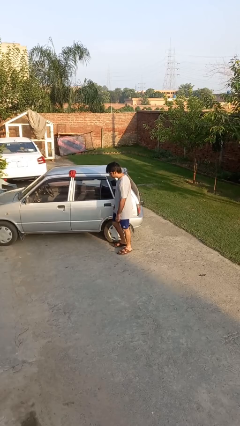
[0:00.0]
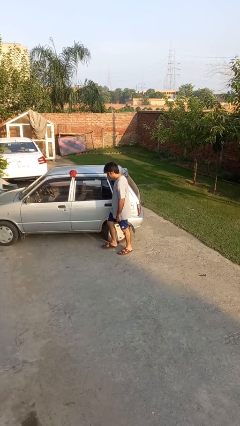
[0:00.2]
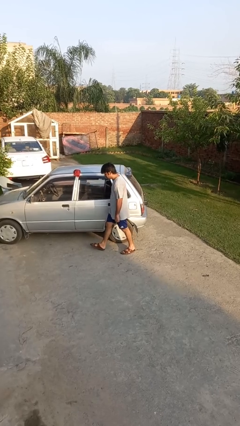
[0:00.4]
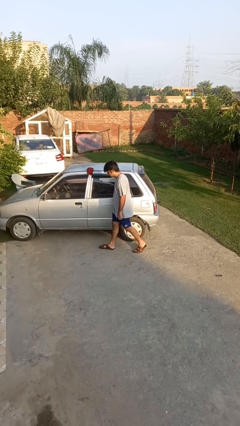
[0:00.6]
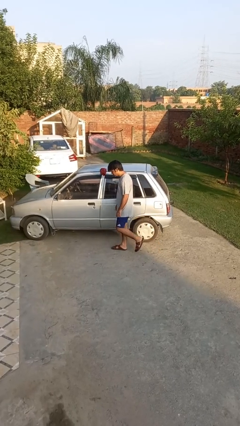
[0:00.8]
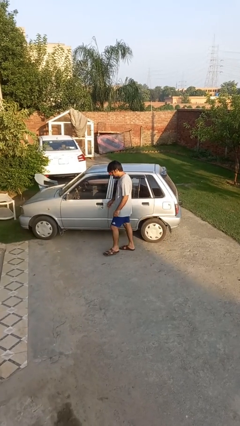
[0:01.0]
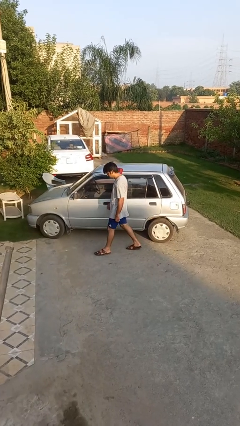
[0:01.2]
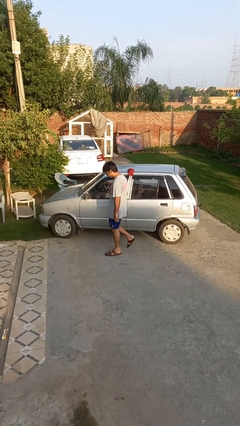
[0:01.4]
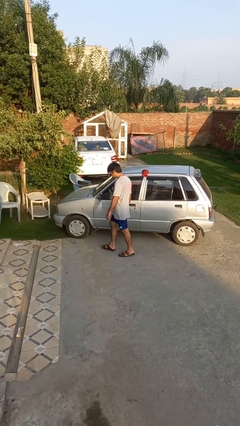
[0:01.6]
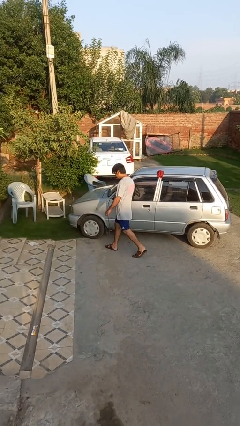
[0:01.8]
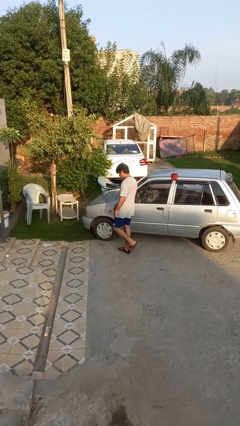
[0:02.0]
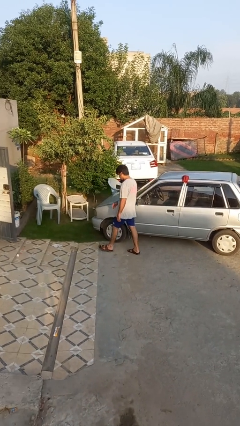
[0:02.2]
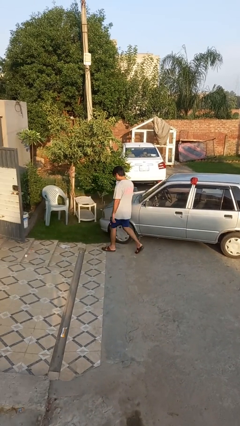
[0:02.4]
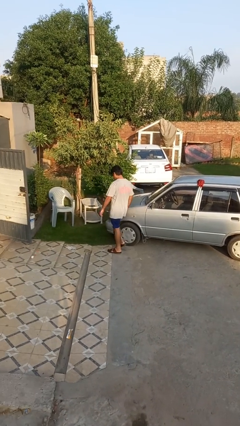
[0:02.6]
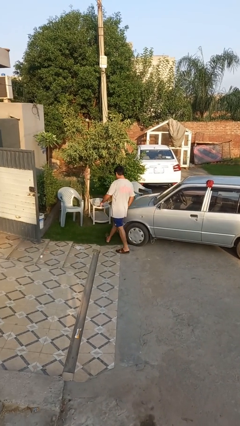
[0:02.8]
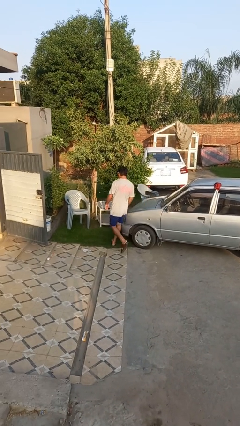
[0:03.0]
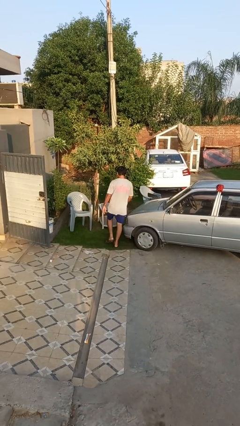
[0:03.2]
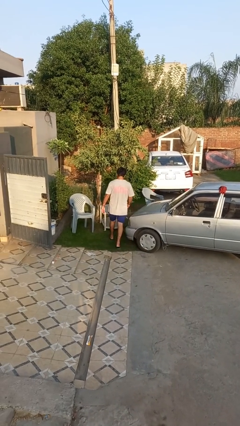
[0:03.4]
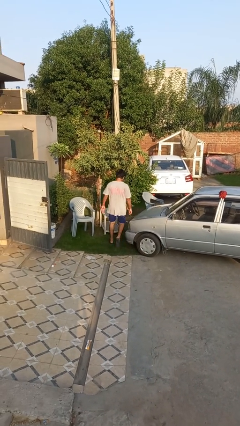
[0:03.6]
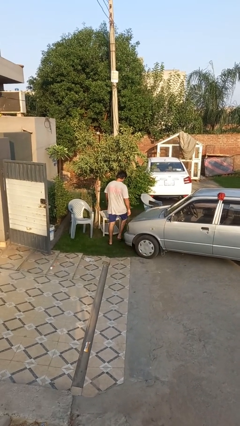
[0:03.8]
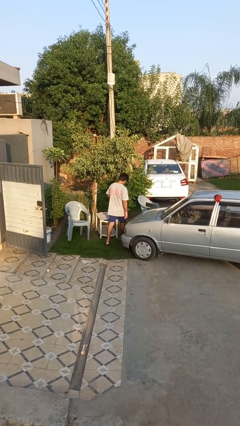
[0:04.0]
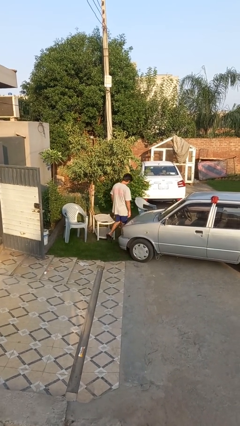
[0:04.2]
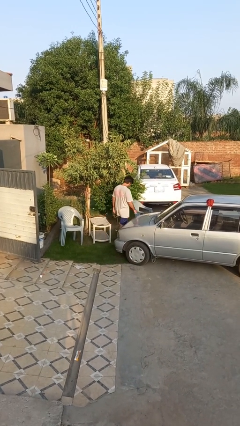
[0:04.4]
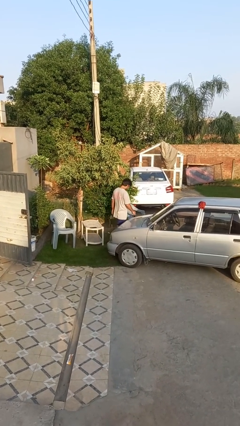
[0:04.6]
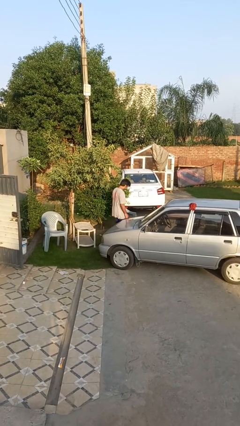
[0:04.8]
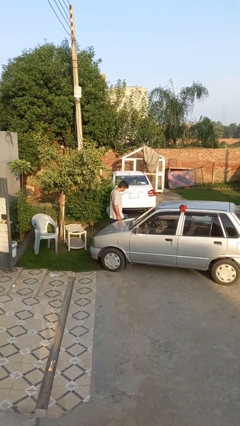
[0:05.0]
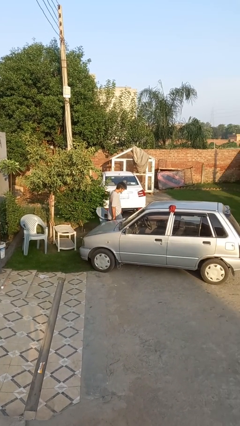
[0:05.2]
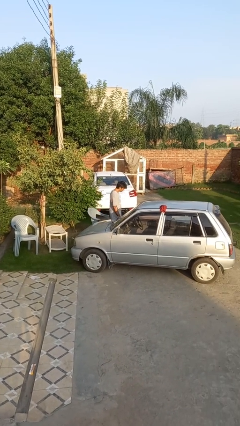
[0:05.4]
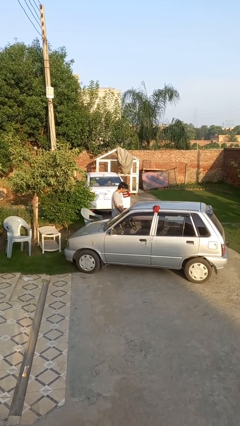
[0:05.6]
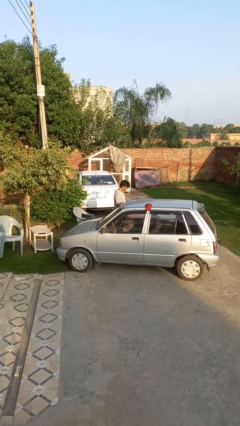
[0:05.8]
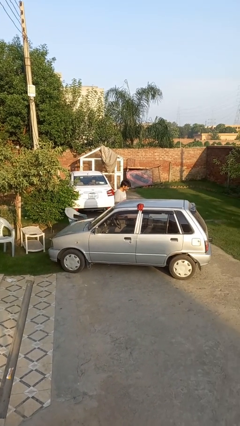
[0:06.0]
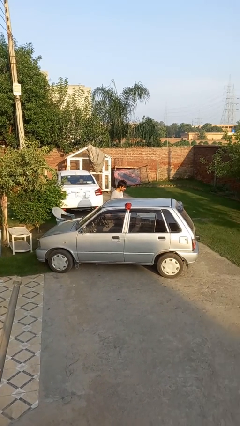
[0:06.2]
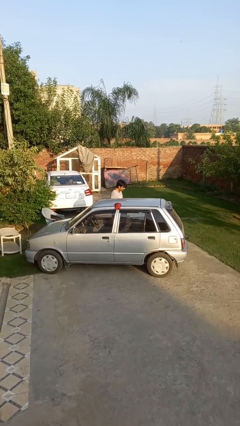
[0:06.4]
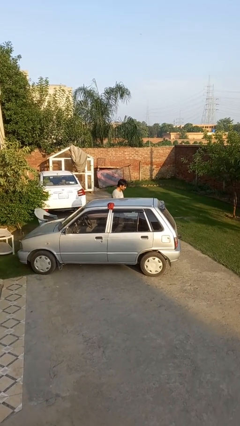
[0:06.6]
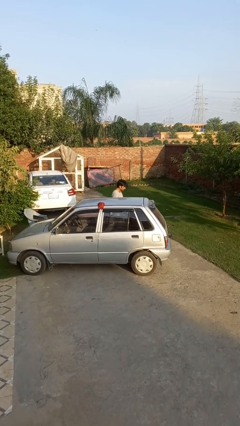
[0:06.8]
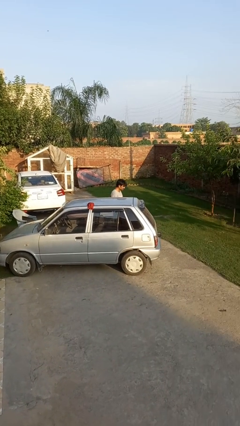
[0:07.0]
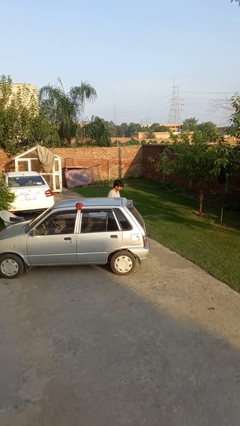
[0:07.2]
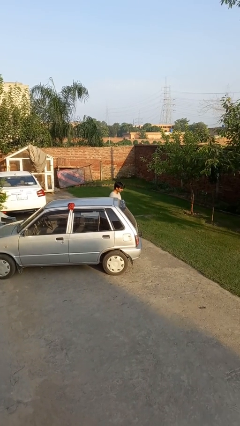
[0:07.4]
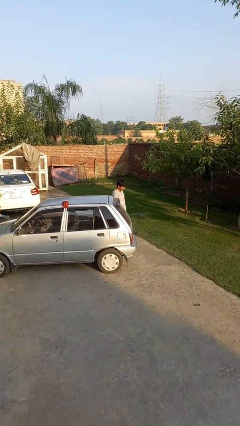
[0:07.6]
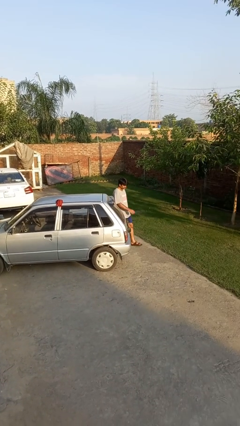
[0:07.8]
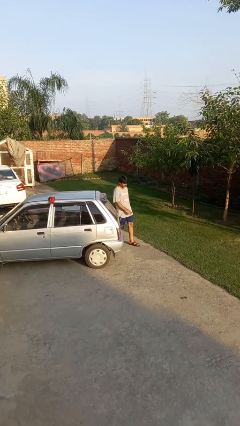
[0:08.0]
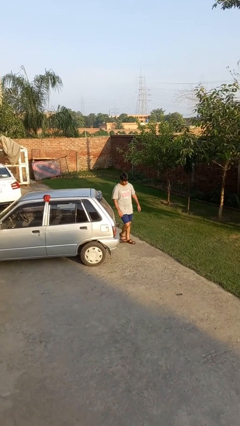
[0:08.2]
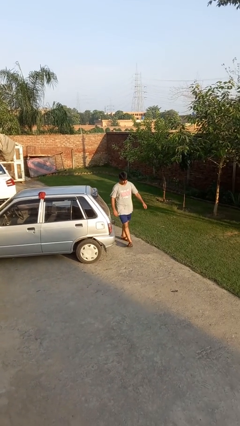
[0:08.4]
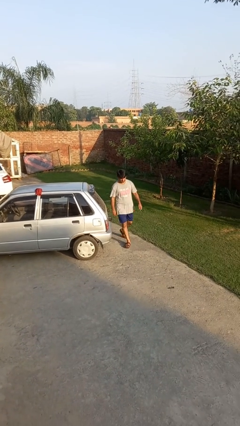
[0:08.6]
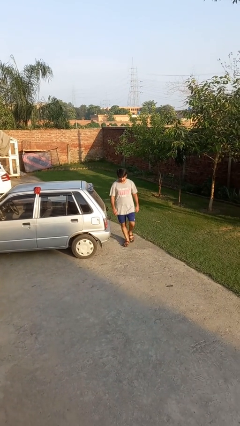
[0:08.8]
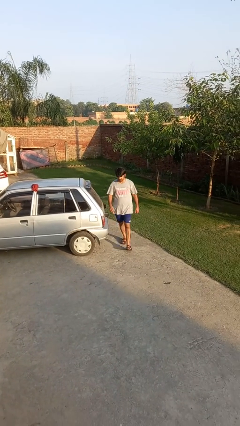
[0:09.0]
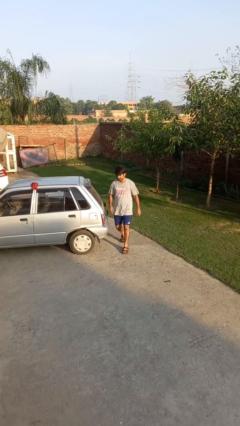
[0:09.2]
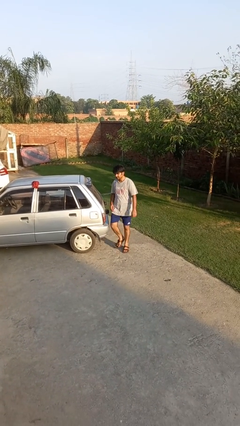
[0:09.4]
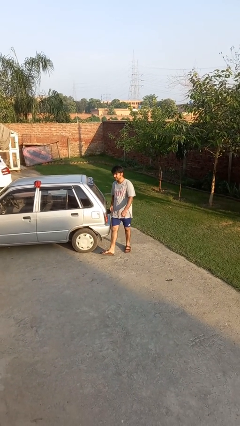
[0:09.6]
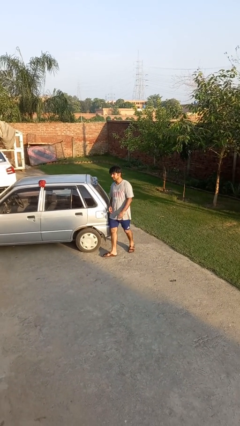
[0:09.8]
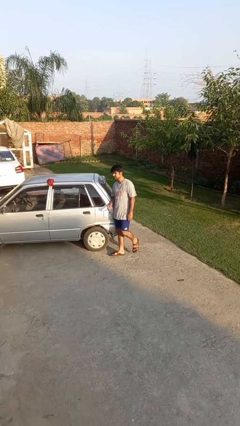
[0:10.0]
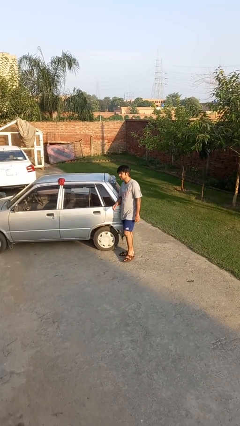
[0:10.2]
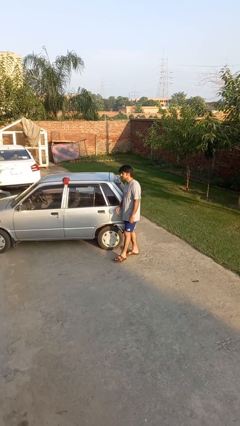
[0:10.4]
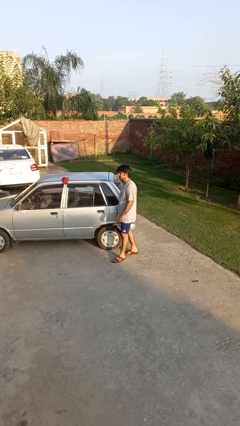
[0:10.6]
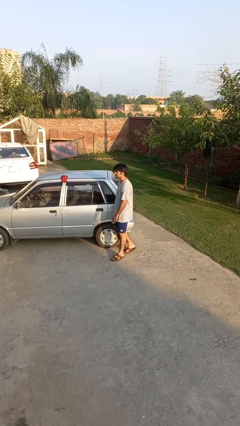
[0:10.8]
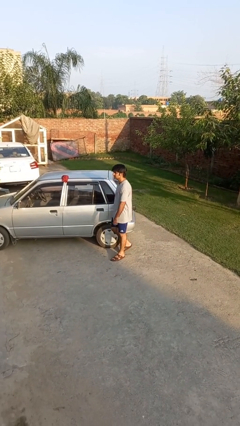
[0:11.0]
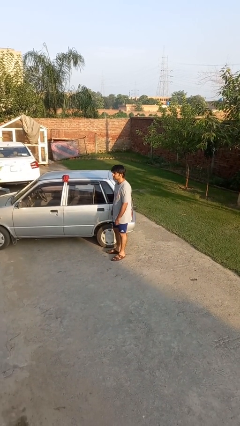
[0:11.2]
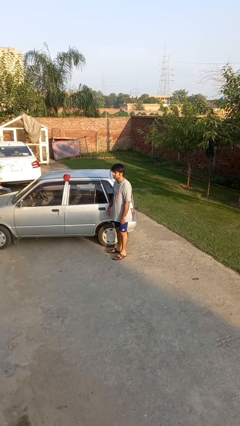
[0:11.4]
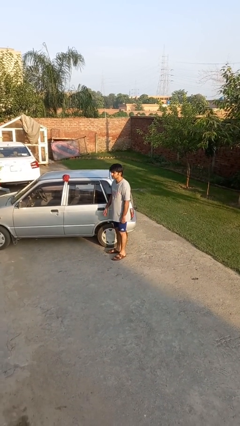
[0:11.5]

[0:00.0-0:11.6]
person walks around car

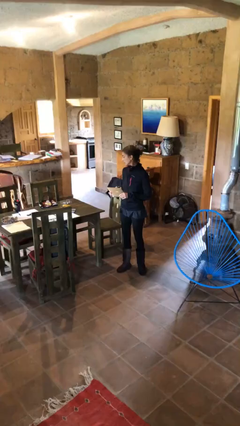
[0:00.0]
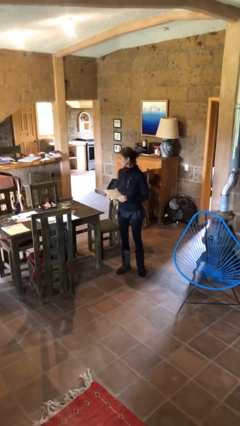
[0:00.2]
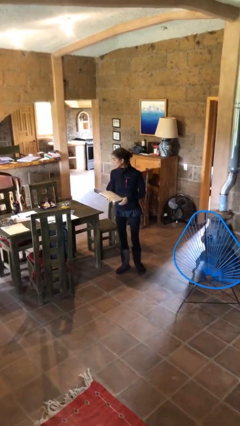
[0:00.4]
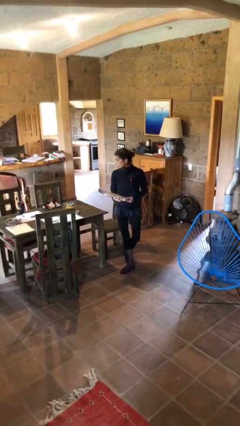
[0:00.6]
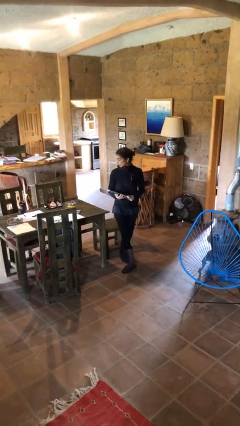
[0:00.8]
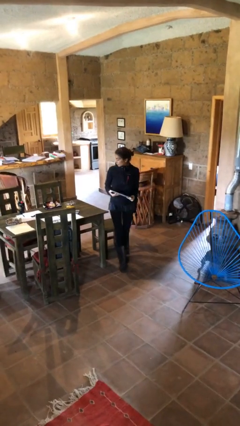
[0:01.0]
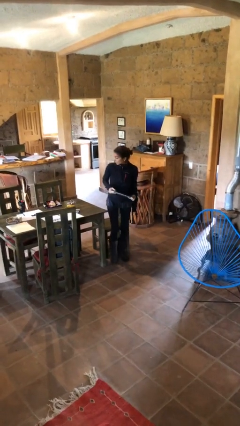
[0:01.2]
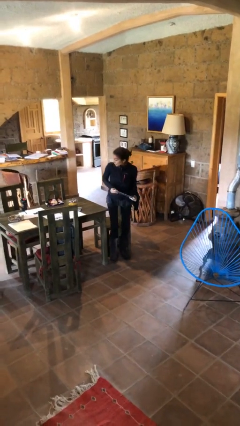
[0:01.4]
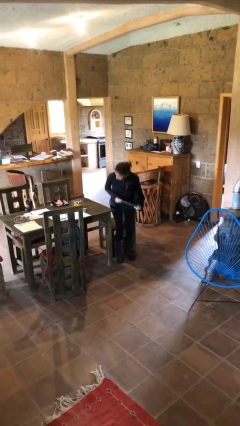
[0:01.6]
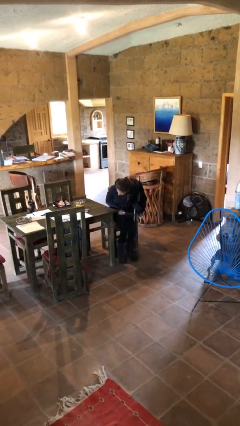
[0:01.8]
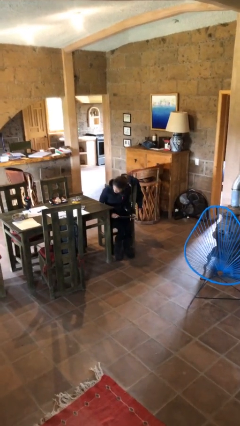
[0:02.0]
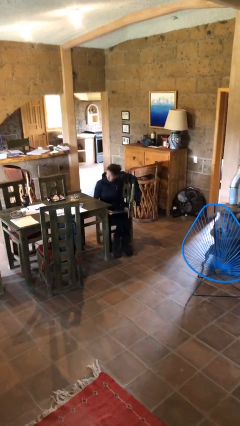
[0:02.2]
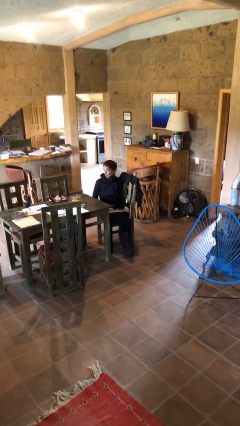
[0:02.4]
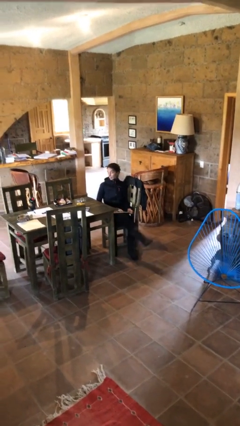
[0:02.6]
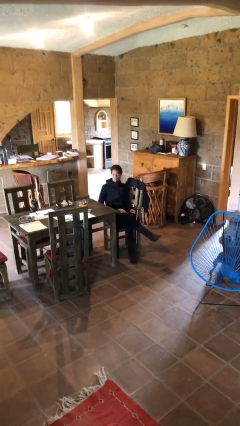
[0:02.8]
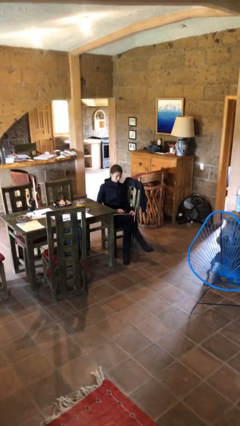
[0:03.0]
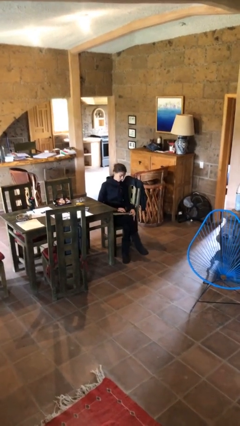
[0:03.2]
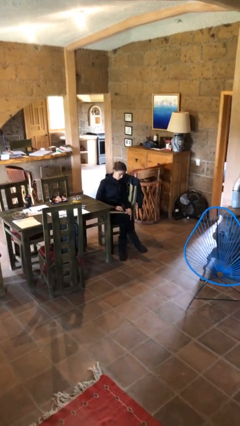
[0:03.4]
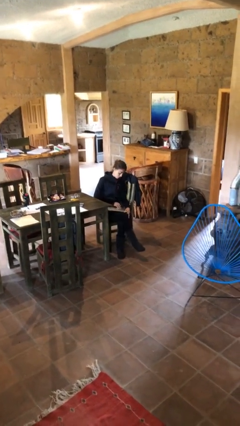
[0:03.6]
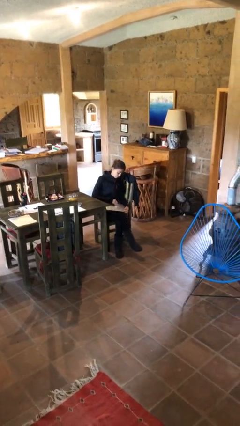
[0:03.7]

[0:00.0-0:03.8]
person sits down

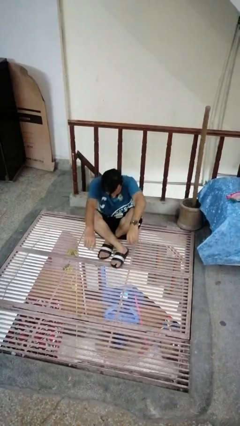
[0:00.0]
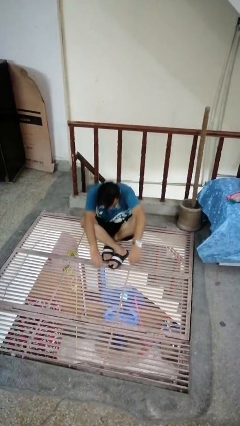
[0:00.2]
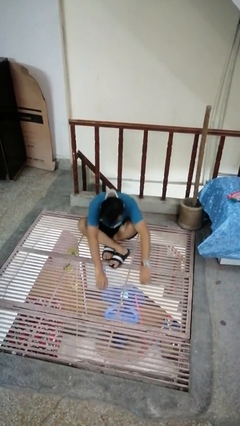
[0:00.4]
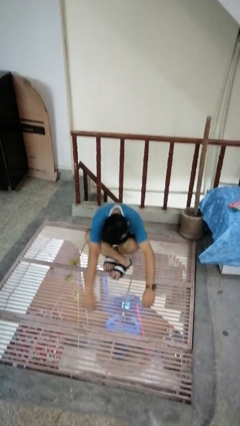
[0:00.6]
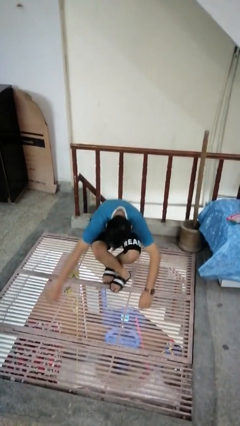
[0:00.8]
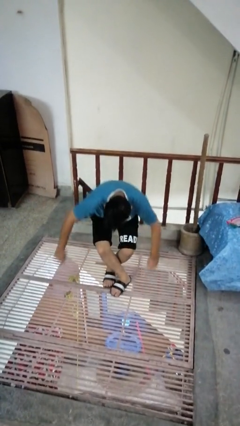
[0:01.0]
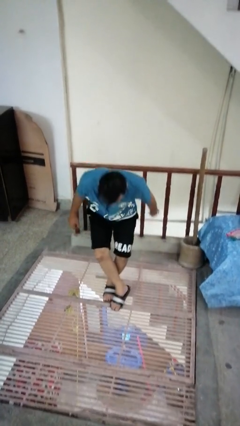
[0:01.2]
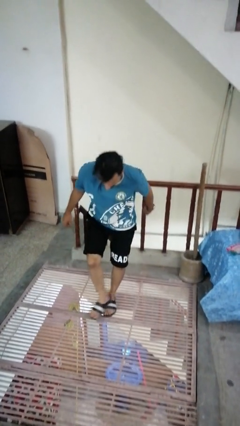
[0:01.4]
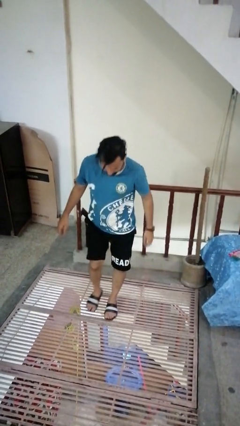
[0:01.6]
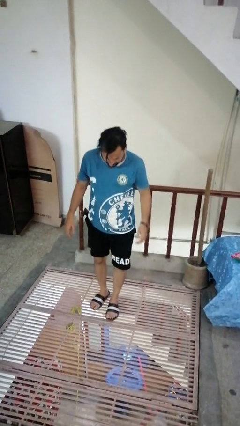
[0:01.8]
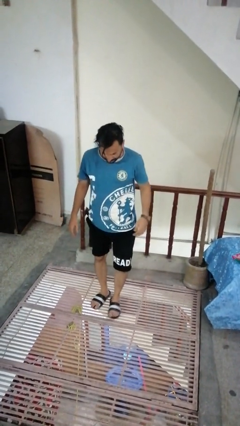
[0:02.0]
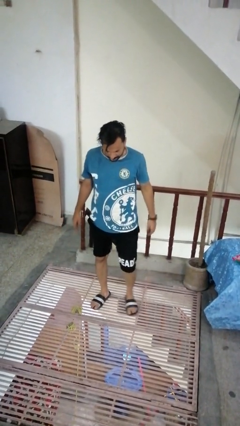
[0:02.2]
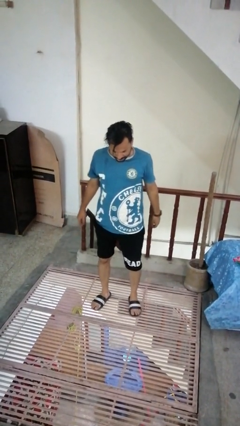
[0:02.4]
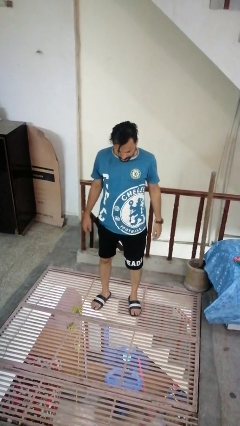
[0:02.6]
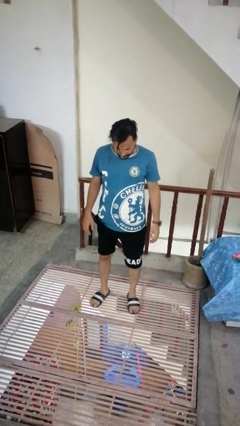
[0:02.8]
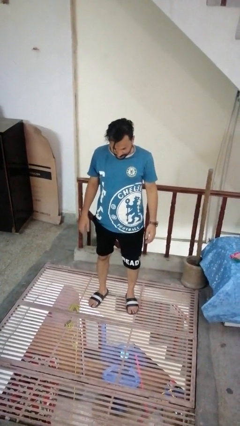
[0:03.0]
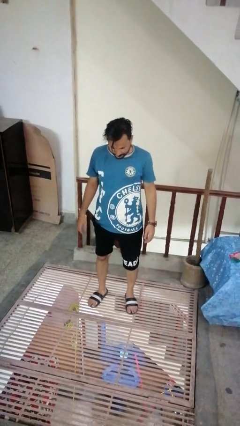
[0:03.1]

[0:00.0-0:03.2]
person stands up from floor
